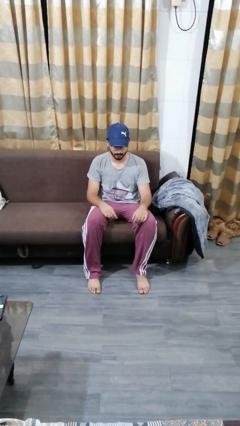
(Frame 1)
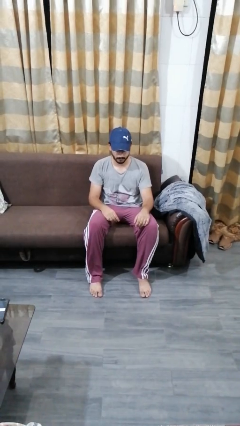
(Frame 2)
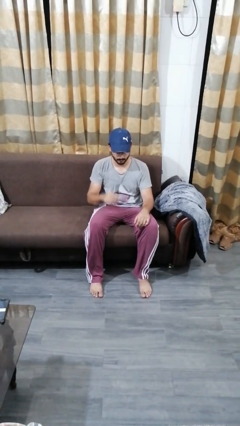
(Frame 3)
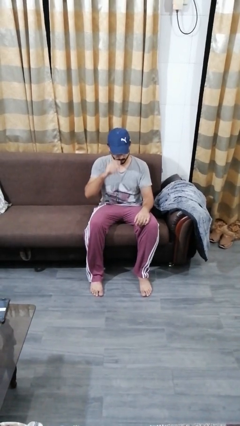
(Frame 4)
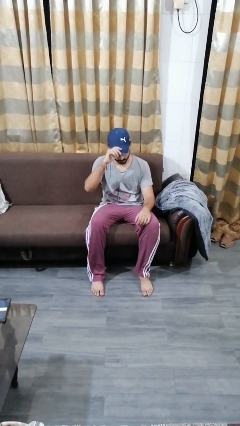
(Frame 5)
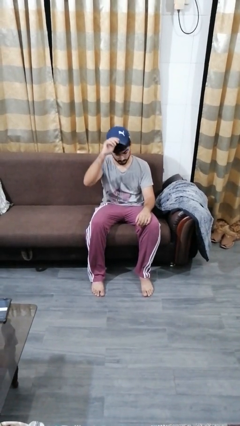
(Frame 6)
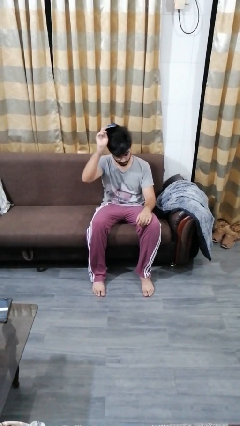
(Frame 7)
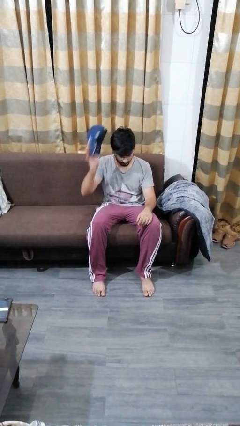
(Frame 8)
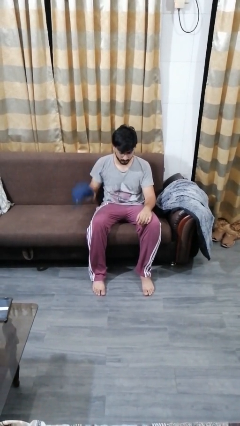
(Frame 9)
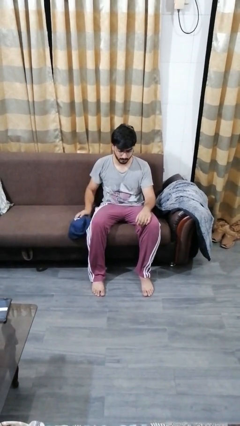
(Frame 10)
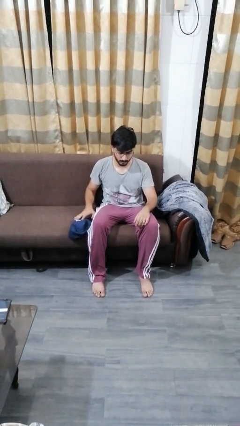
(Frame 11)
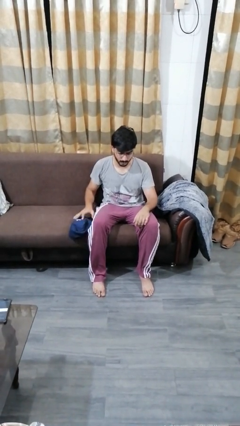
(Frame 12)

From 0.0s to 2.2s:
person takes off hat

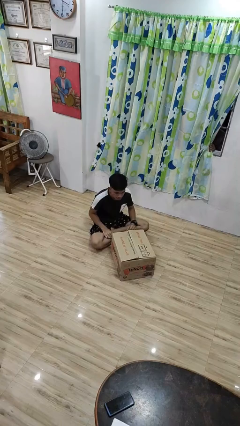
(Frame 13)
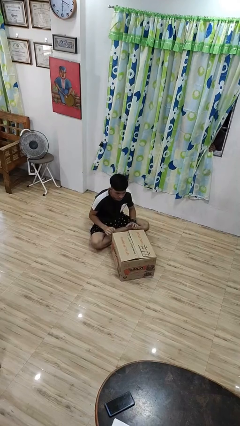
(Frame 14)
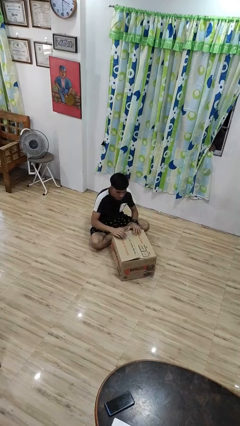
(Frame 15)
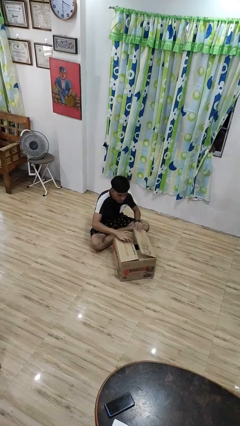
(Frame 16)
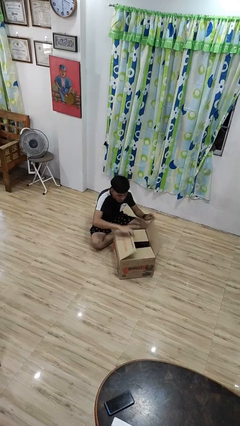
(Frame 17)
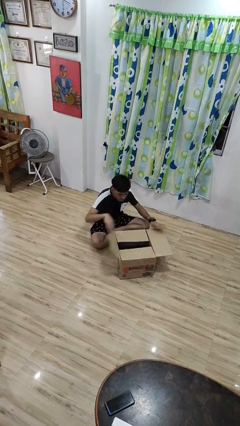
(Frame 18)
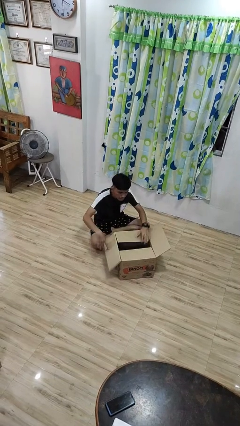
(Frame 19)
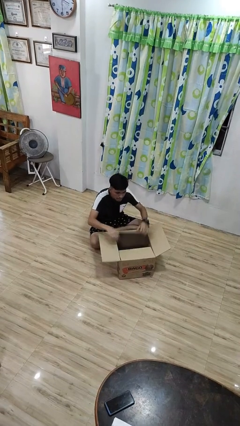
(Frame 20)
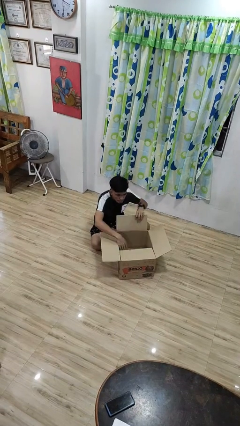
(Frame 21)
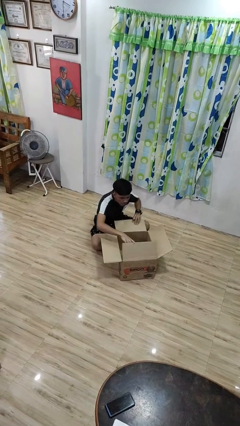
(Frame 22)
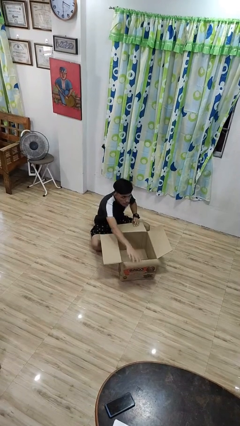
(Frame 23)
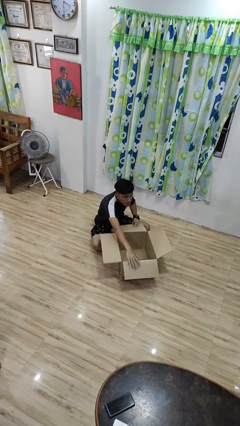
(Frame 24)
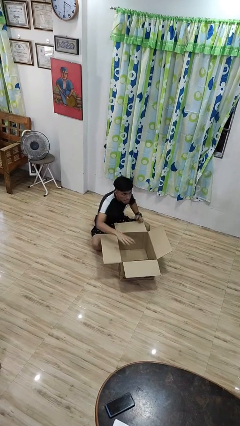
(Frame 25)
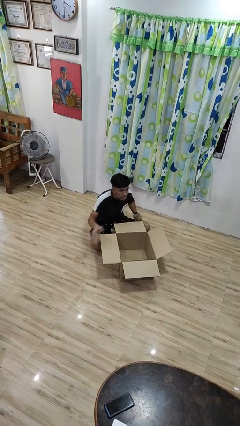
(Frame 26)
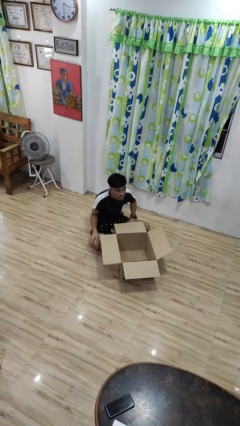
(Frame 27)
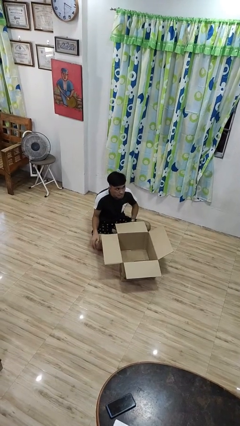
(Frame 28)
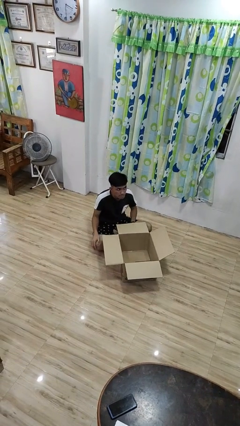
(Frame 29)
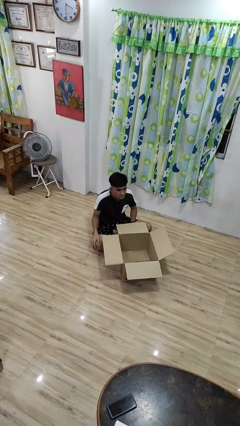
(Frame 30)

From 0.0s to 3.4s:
person opens box

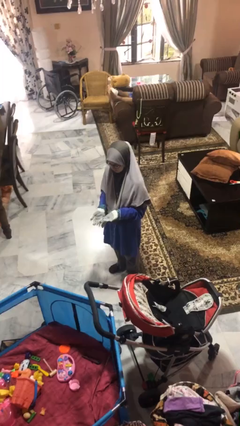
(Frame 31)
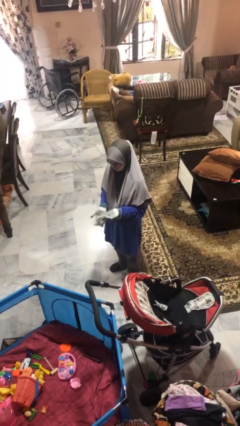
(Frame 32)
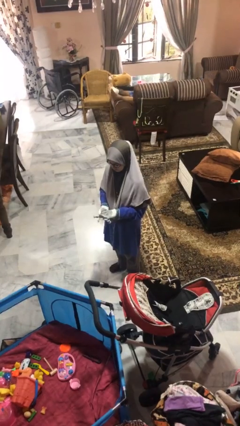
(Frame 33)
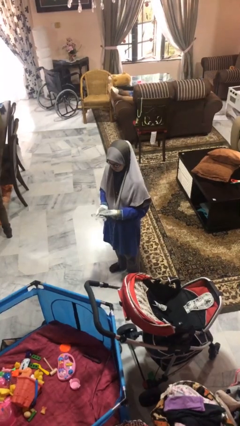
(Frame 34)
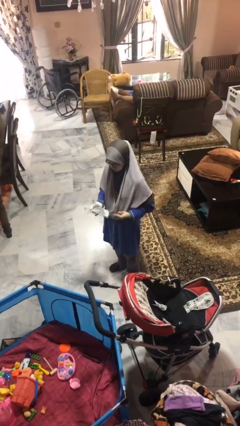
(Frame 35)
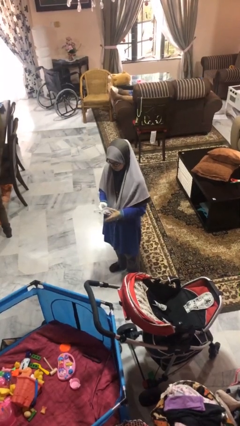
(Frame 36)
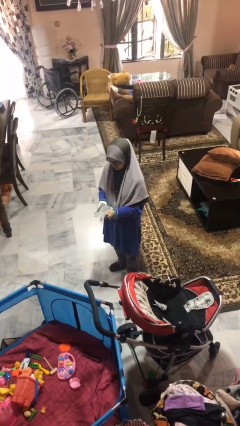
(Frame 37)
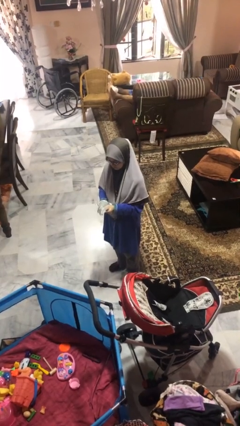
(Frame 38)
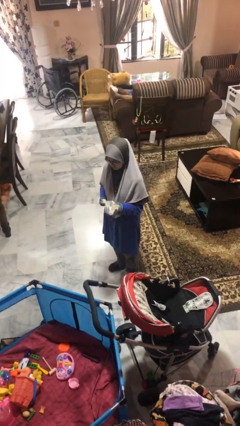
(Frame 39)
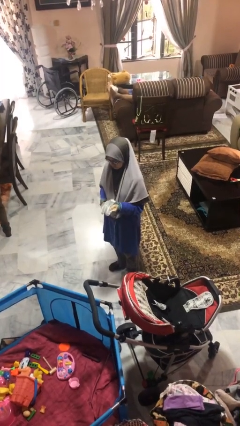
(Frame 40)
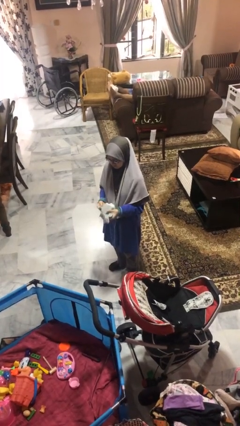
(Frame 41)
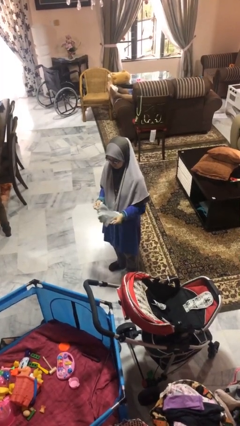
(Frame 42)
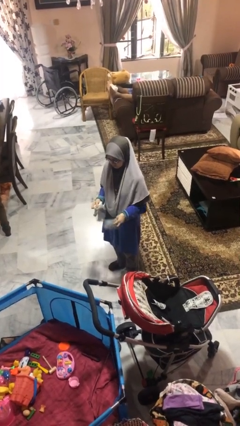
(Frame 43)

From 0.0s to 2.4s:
person takes off gloves

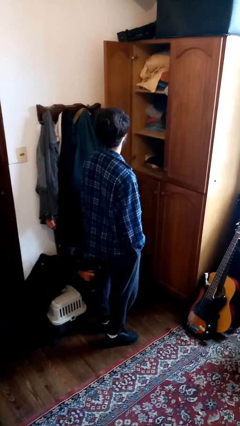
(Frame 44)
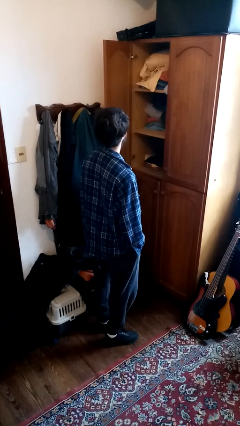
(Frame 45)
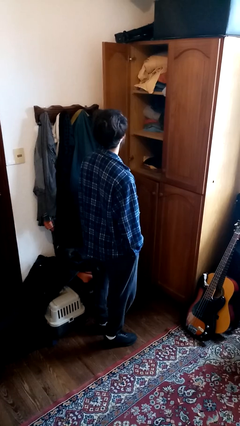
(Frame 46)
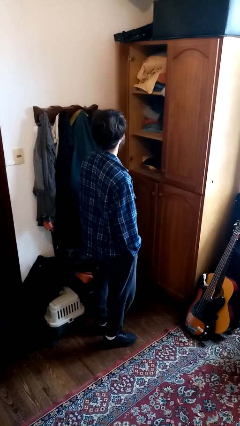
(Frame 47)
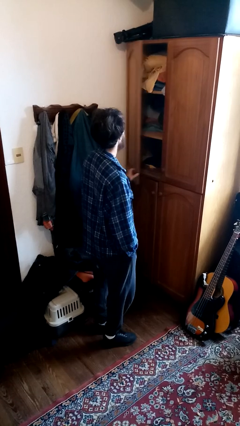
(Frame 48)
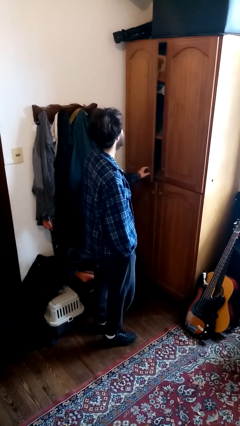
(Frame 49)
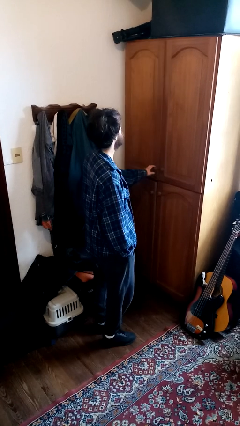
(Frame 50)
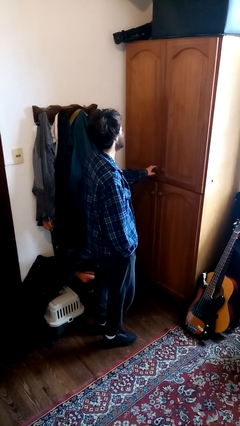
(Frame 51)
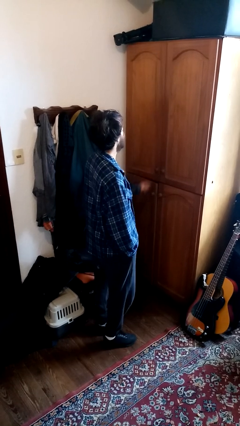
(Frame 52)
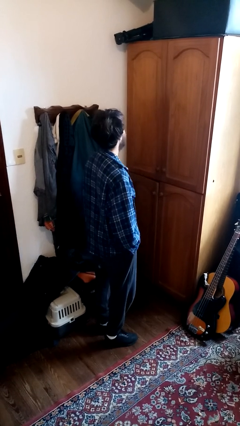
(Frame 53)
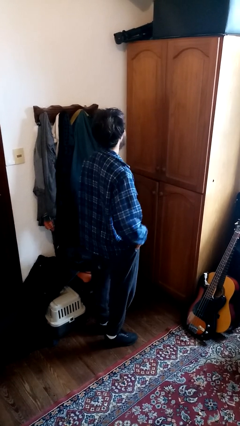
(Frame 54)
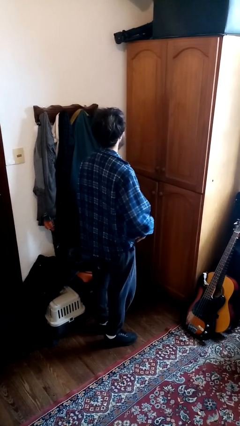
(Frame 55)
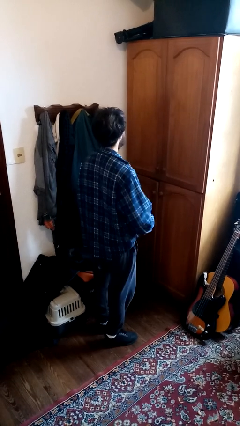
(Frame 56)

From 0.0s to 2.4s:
person closes dresser drawer

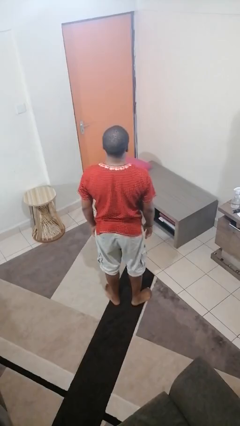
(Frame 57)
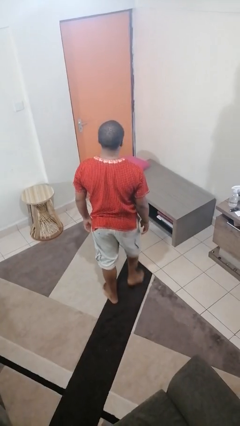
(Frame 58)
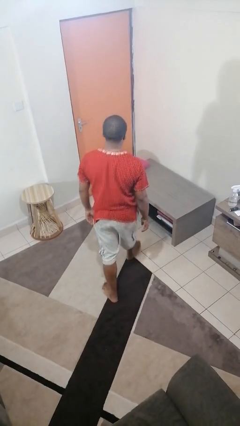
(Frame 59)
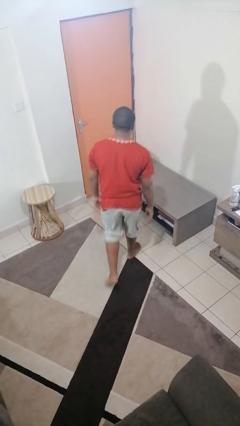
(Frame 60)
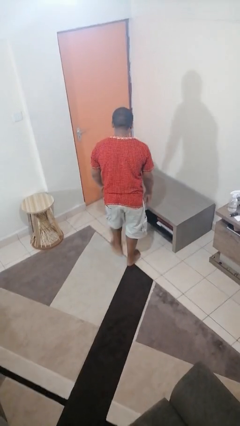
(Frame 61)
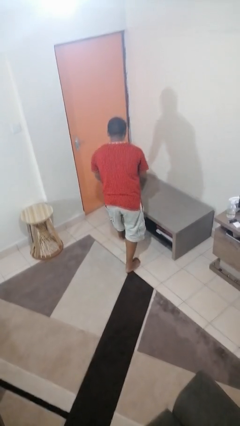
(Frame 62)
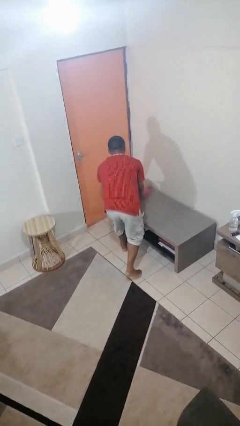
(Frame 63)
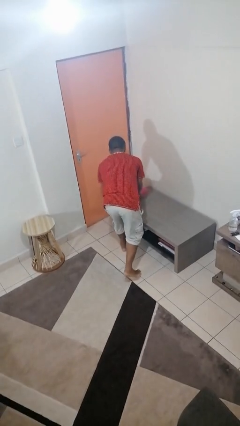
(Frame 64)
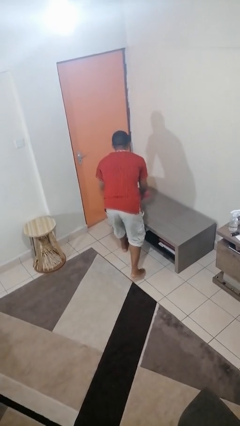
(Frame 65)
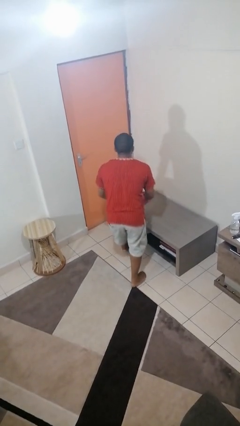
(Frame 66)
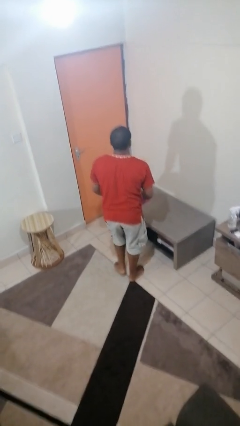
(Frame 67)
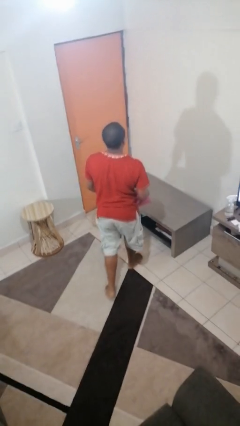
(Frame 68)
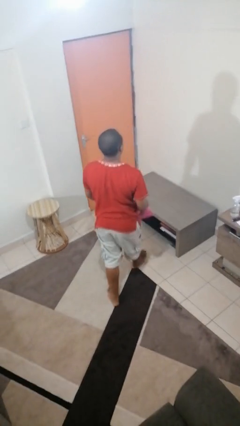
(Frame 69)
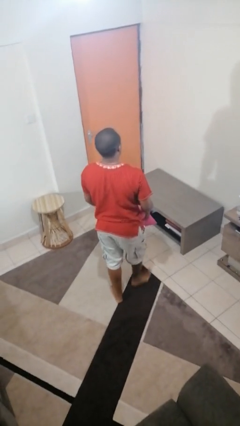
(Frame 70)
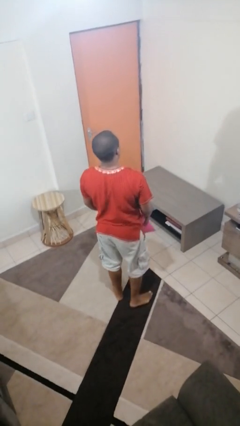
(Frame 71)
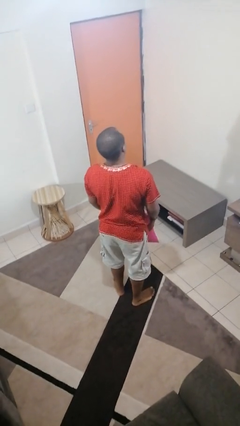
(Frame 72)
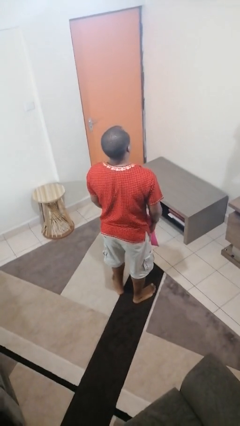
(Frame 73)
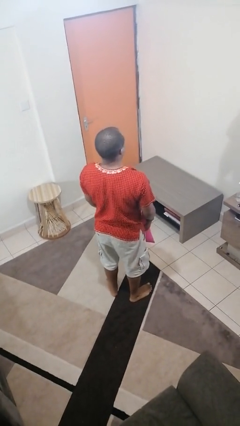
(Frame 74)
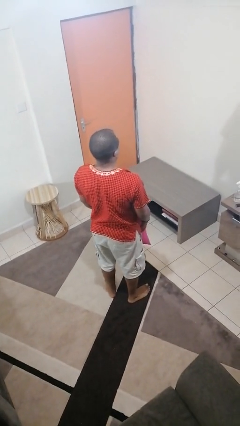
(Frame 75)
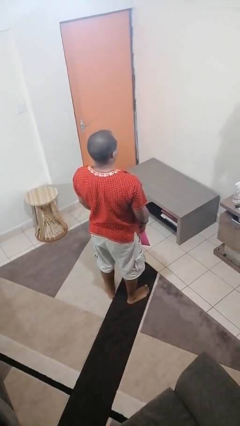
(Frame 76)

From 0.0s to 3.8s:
person picks up object from table

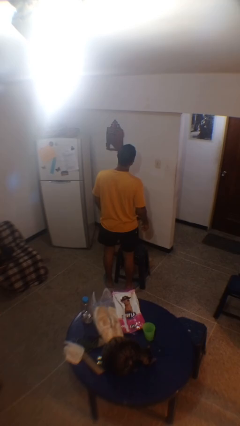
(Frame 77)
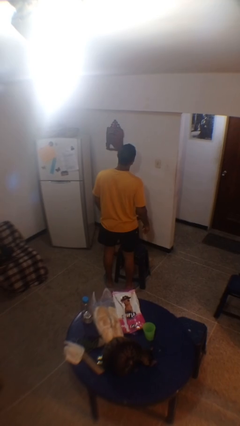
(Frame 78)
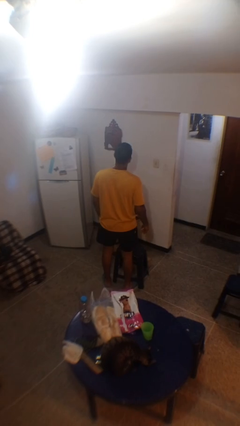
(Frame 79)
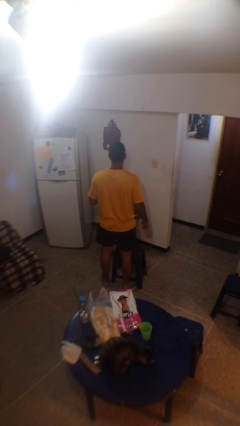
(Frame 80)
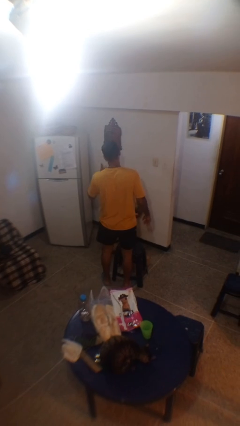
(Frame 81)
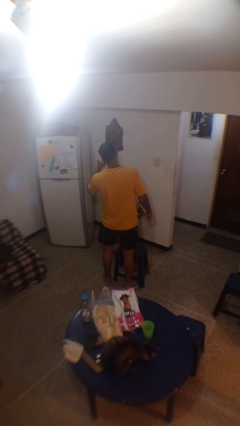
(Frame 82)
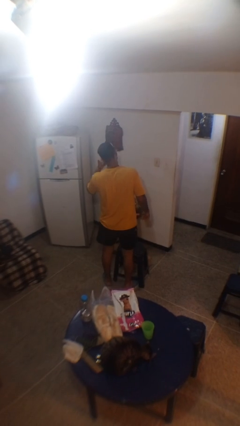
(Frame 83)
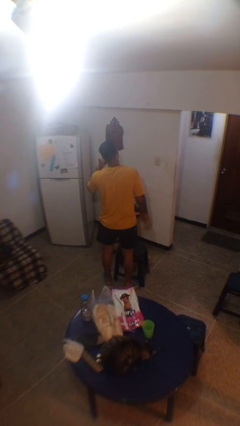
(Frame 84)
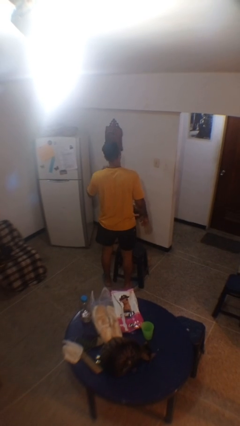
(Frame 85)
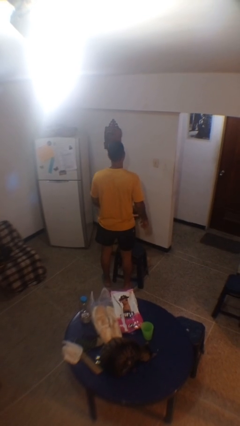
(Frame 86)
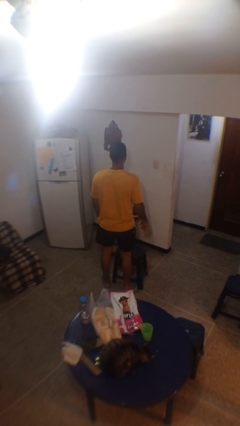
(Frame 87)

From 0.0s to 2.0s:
person gestures call me

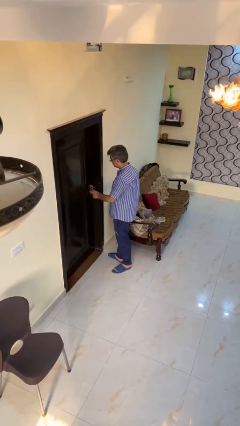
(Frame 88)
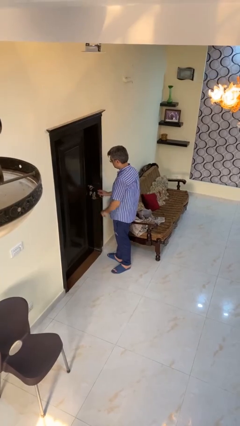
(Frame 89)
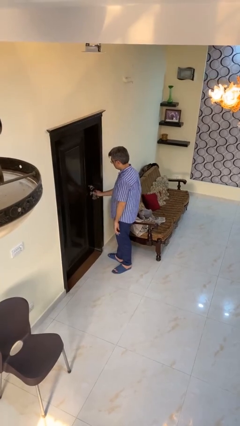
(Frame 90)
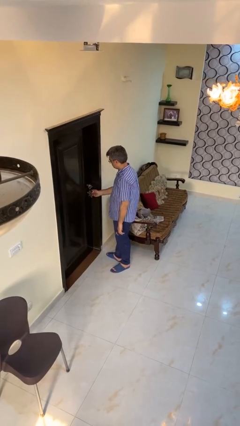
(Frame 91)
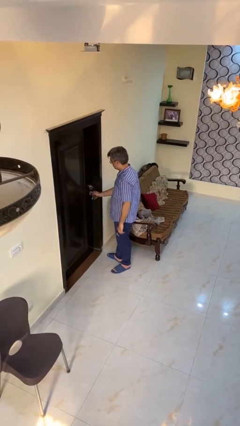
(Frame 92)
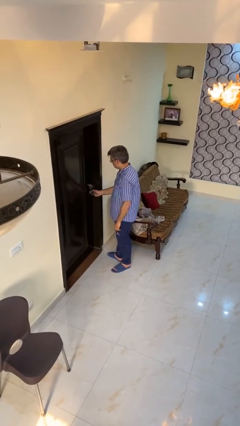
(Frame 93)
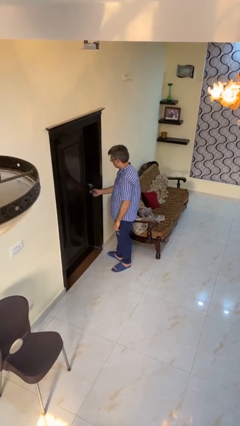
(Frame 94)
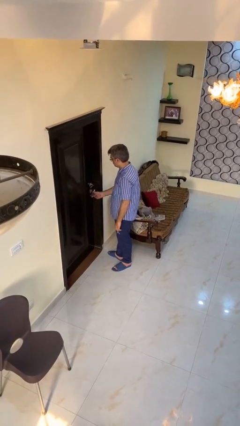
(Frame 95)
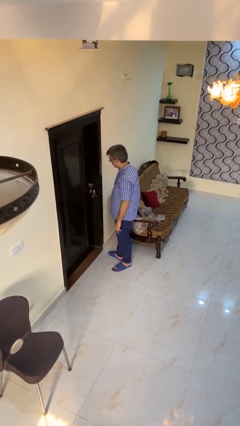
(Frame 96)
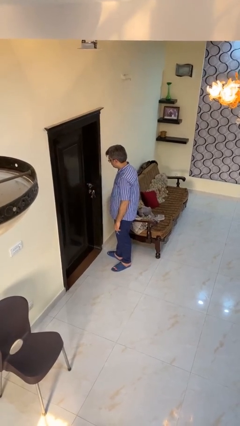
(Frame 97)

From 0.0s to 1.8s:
person locks door with keys
